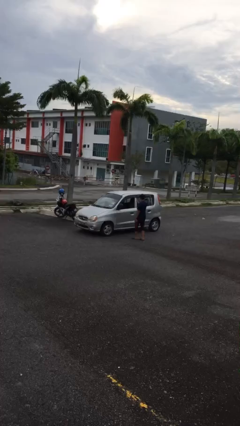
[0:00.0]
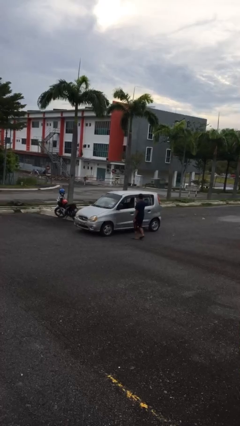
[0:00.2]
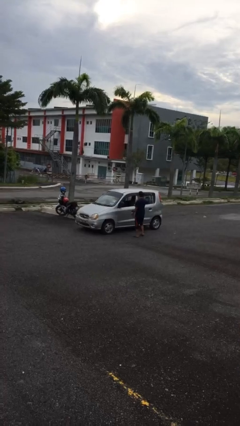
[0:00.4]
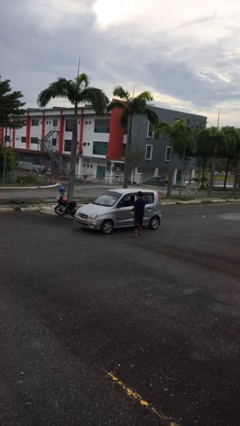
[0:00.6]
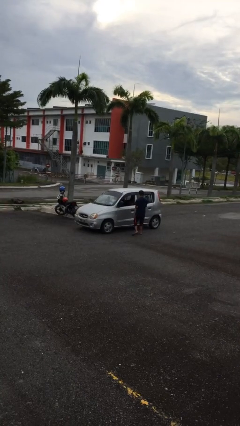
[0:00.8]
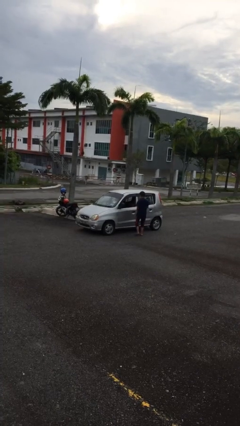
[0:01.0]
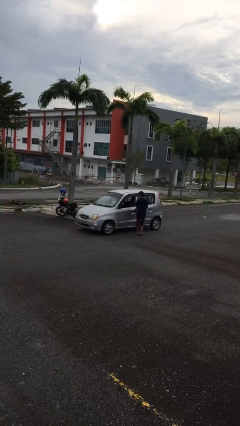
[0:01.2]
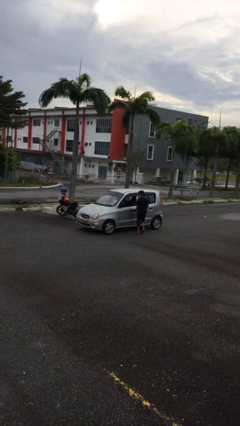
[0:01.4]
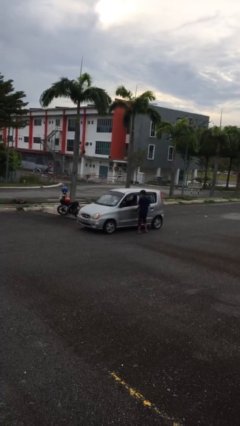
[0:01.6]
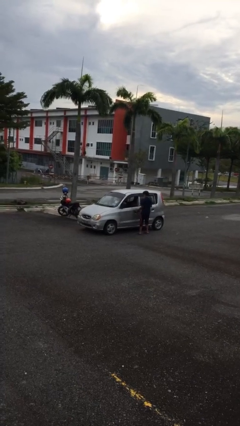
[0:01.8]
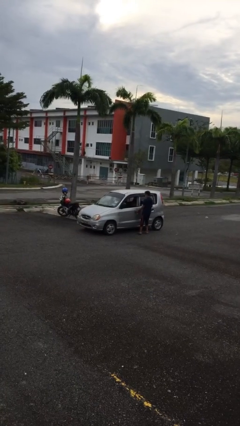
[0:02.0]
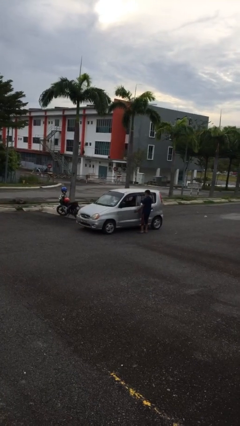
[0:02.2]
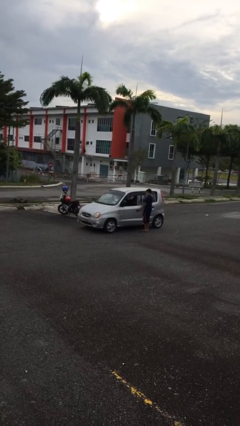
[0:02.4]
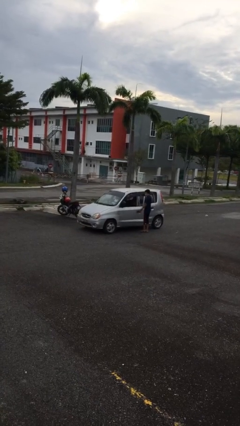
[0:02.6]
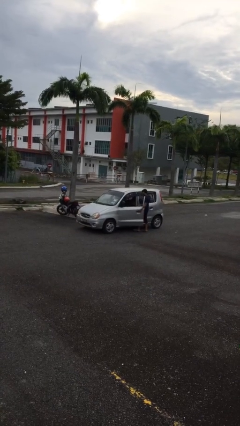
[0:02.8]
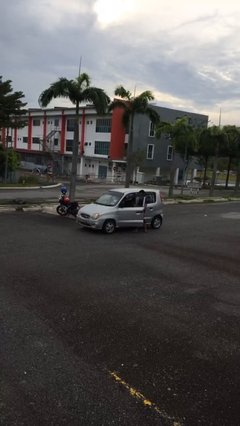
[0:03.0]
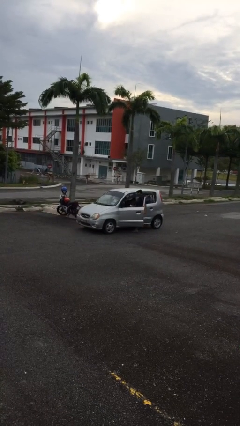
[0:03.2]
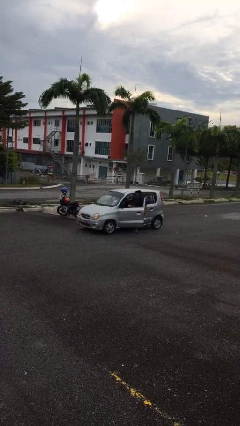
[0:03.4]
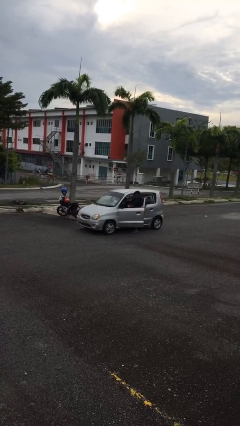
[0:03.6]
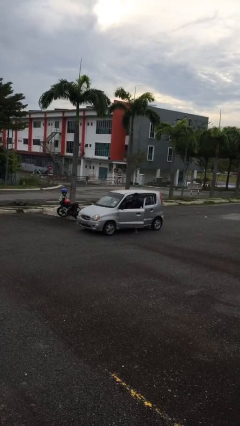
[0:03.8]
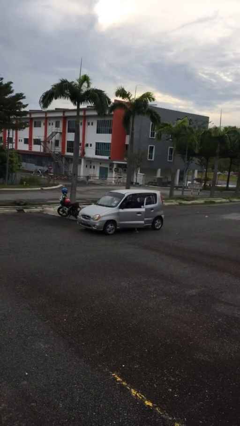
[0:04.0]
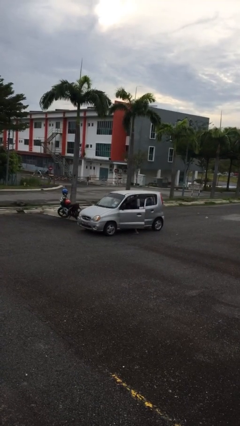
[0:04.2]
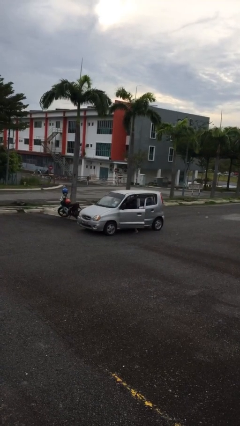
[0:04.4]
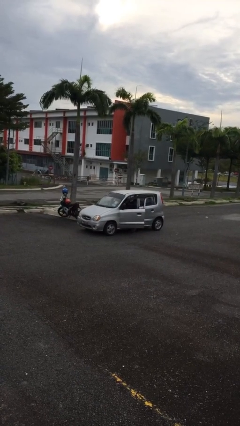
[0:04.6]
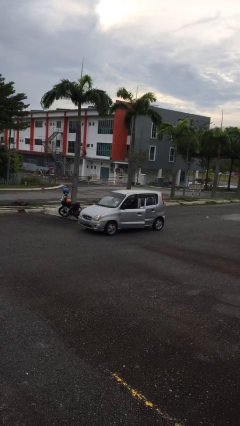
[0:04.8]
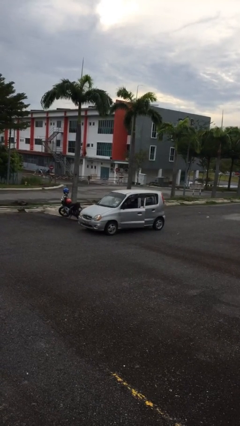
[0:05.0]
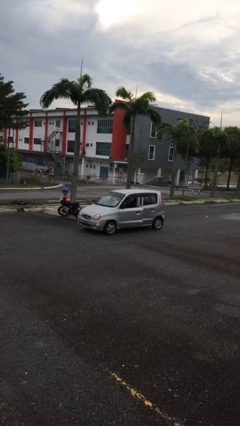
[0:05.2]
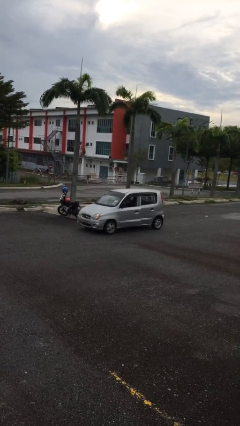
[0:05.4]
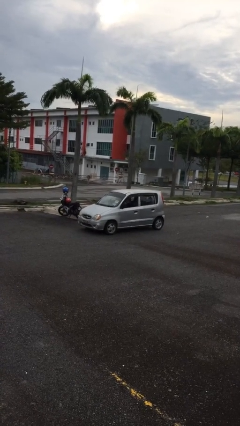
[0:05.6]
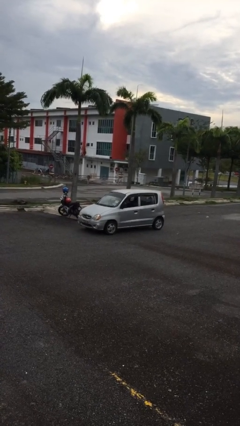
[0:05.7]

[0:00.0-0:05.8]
car picks up person

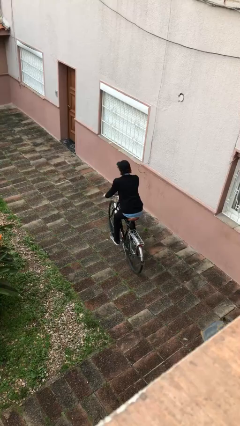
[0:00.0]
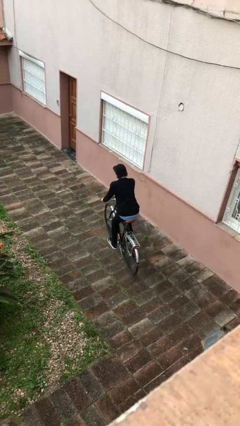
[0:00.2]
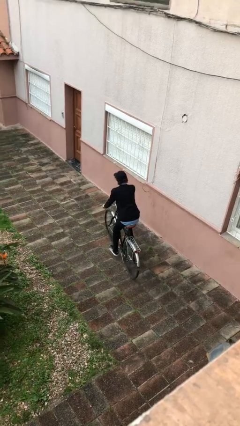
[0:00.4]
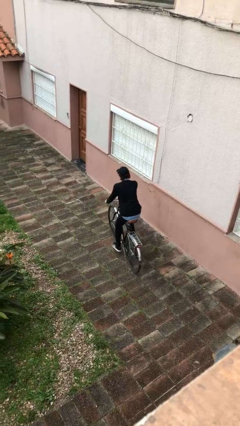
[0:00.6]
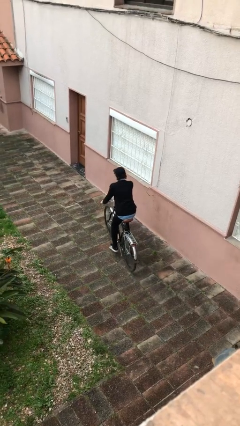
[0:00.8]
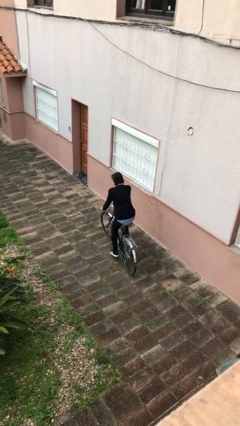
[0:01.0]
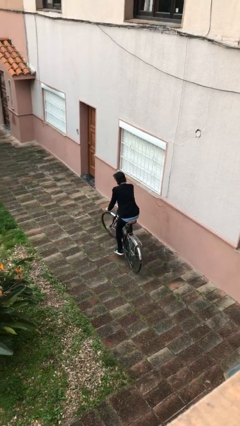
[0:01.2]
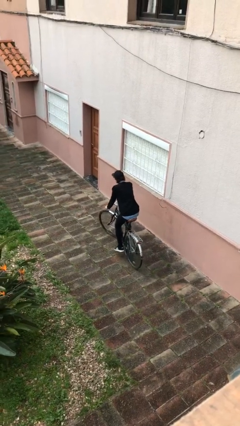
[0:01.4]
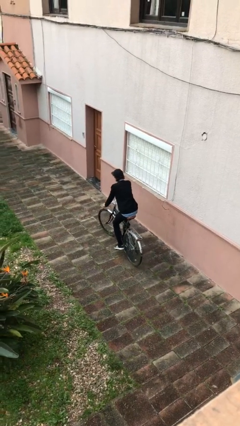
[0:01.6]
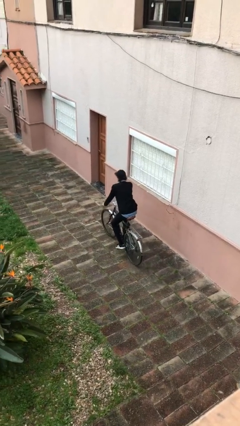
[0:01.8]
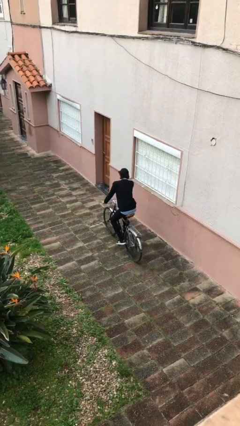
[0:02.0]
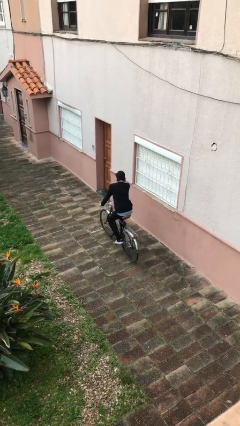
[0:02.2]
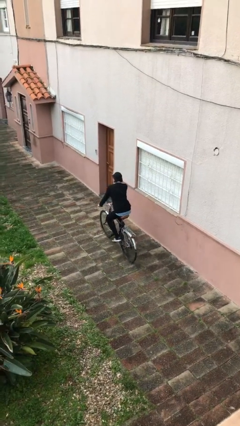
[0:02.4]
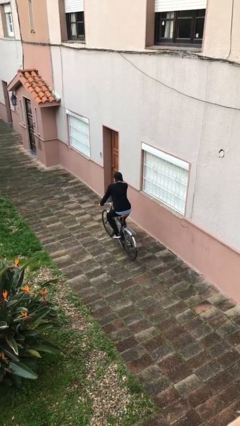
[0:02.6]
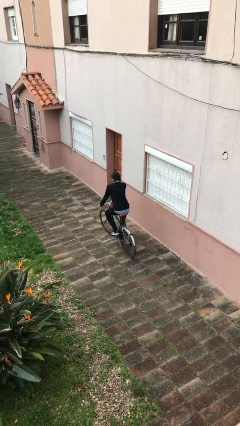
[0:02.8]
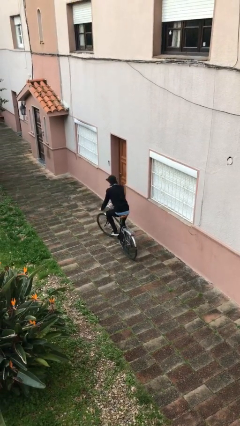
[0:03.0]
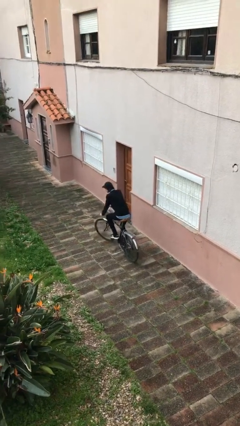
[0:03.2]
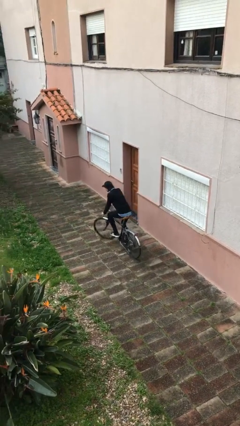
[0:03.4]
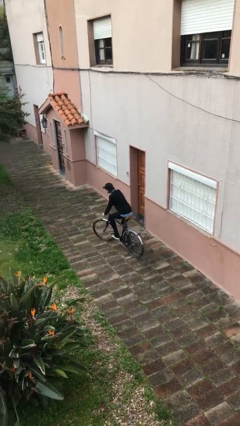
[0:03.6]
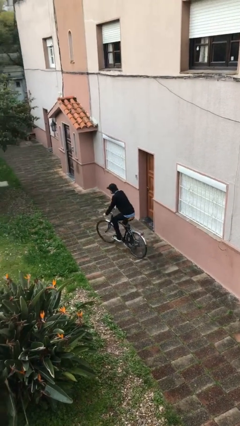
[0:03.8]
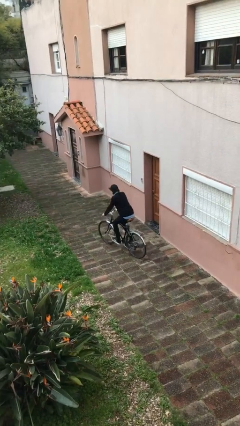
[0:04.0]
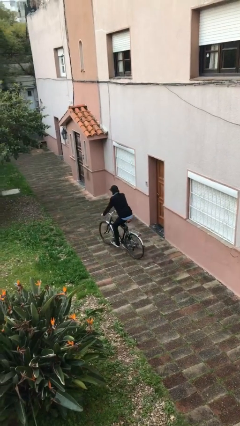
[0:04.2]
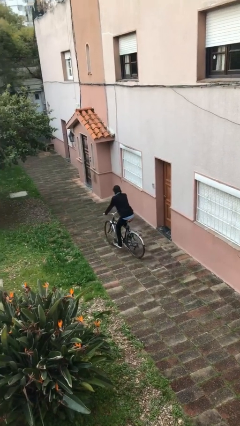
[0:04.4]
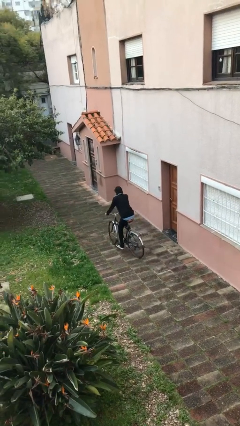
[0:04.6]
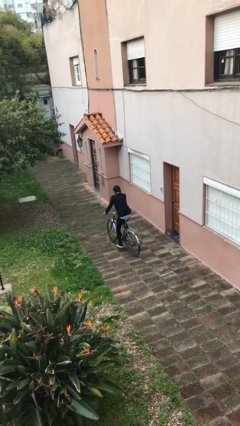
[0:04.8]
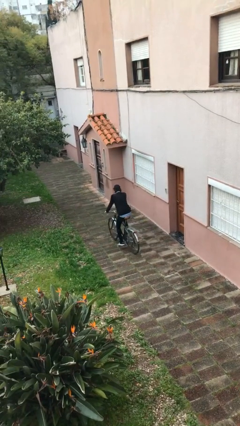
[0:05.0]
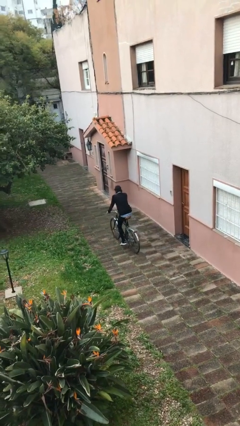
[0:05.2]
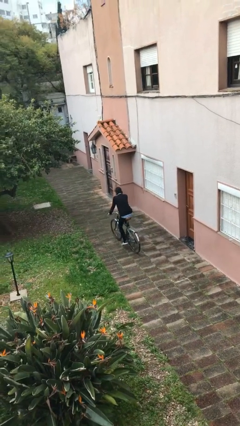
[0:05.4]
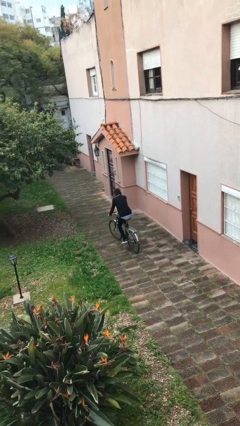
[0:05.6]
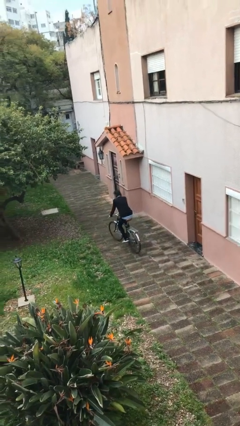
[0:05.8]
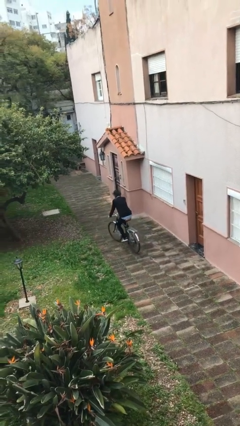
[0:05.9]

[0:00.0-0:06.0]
person rides bicycle

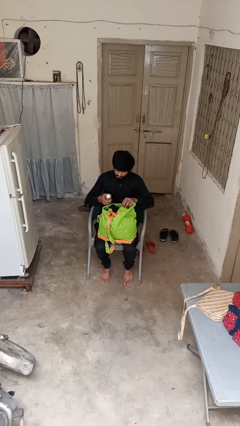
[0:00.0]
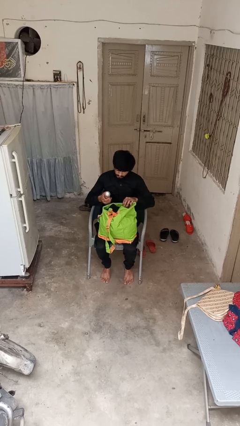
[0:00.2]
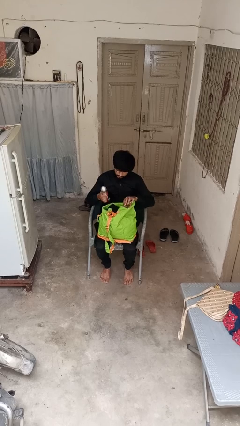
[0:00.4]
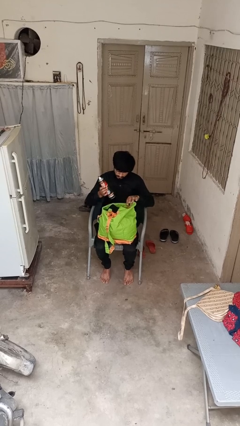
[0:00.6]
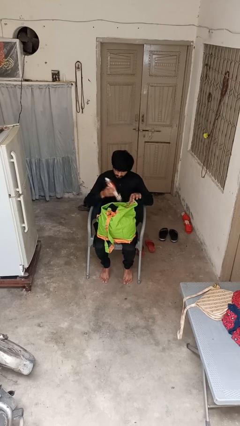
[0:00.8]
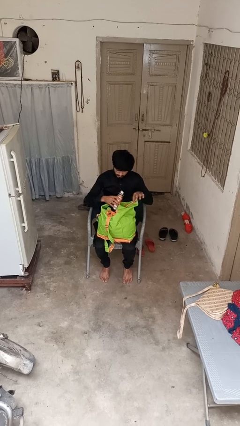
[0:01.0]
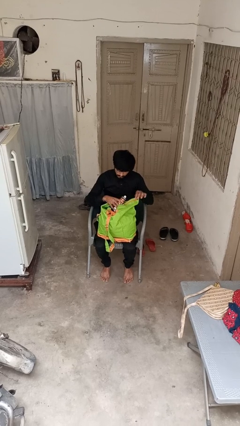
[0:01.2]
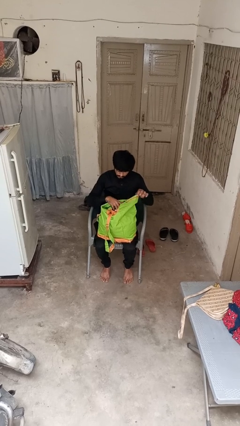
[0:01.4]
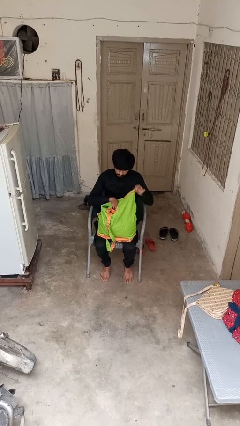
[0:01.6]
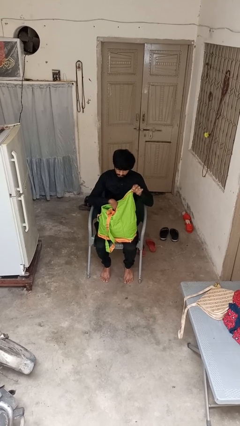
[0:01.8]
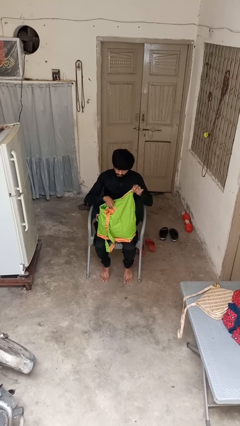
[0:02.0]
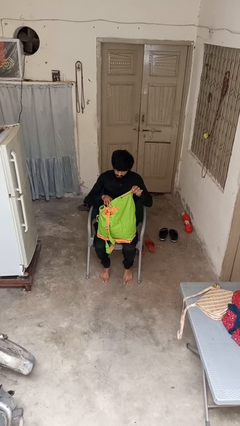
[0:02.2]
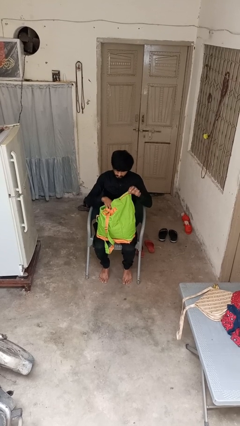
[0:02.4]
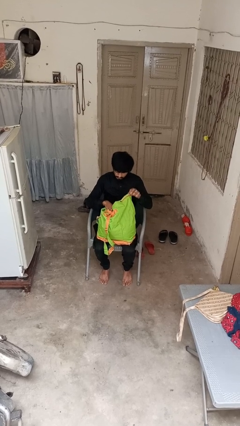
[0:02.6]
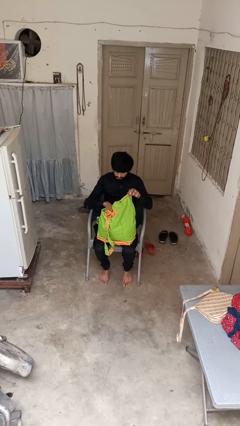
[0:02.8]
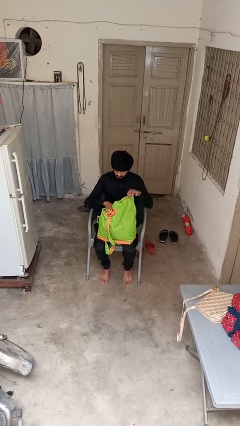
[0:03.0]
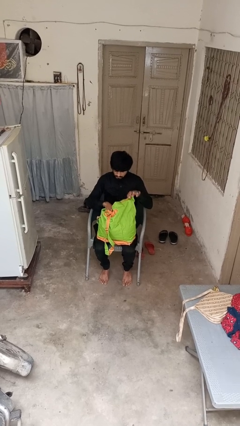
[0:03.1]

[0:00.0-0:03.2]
person puts object into backpack

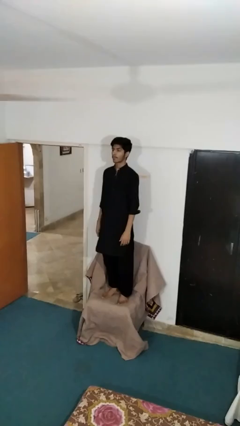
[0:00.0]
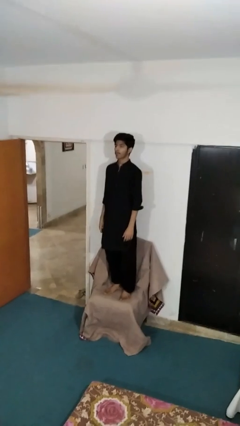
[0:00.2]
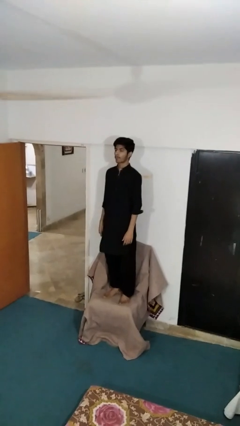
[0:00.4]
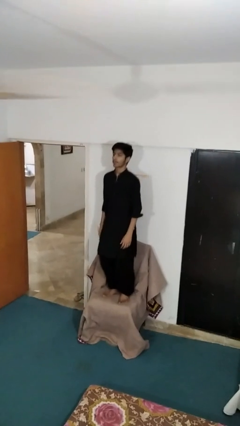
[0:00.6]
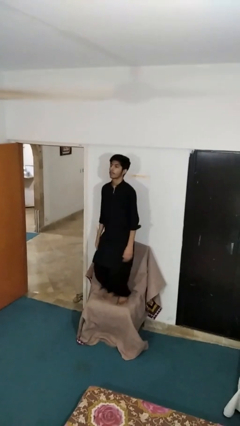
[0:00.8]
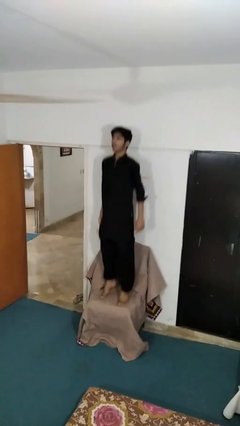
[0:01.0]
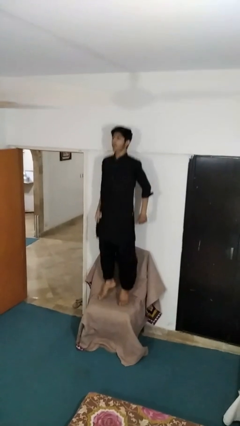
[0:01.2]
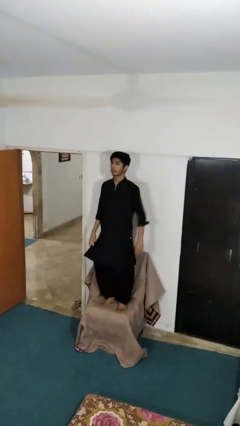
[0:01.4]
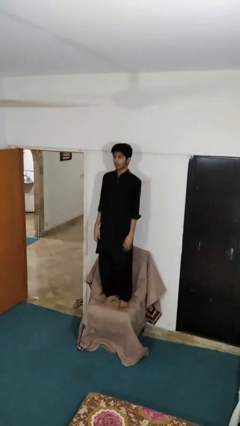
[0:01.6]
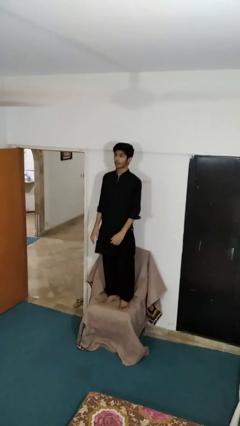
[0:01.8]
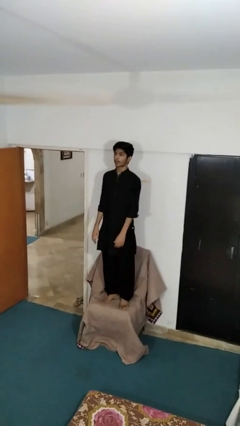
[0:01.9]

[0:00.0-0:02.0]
person jumps on couch

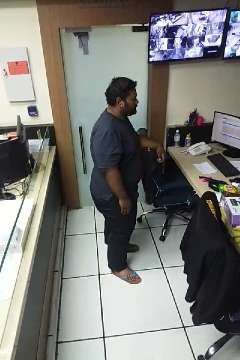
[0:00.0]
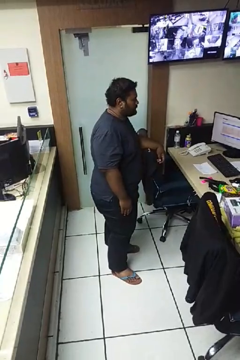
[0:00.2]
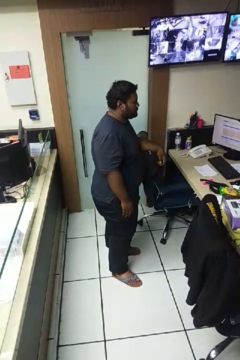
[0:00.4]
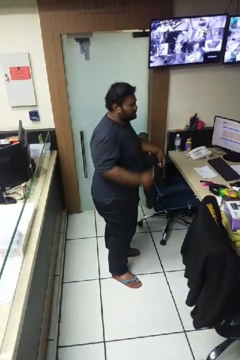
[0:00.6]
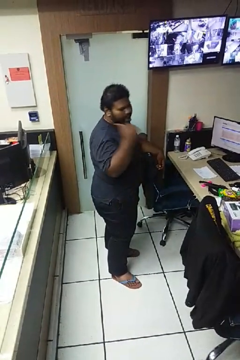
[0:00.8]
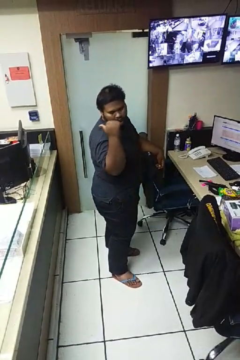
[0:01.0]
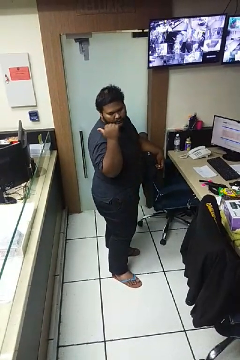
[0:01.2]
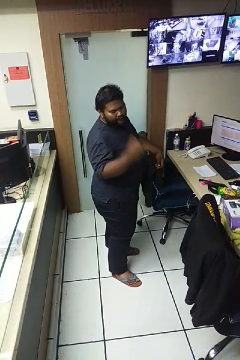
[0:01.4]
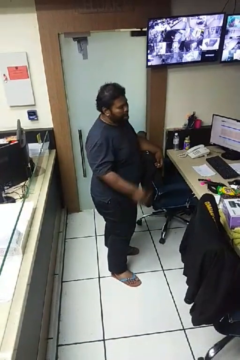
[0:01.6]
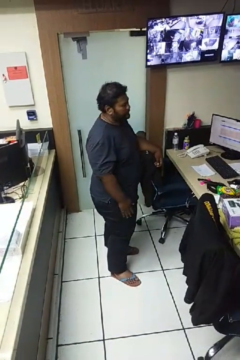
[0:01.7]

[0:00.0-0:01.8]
person gestures behind me
